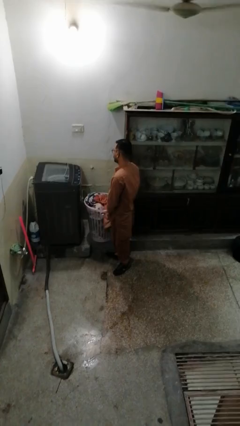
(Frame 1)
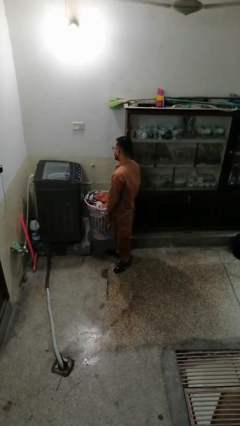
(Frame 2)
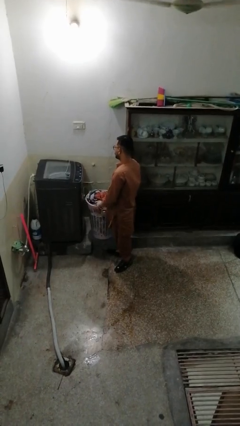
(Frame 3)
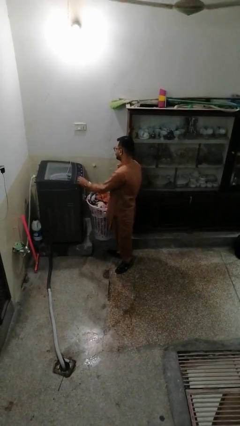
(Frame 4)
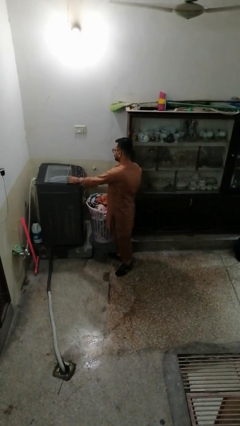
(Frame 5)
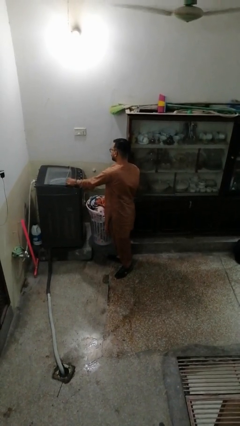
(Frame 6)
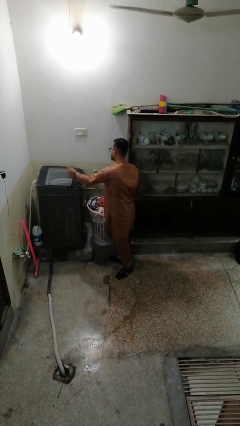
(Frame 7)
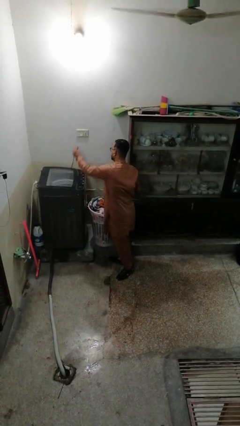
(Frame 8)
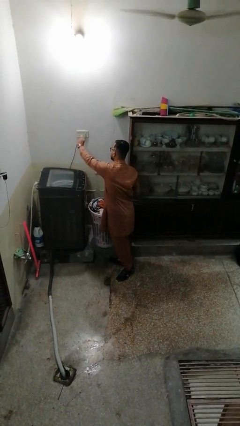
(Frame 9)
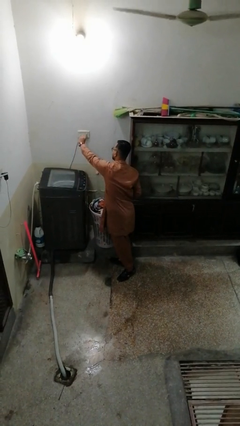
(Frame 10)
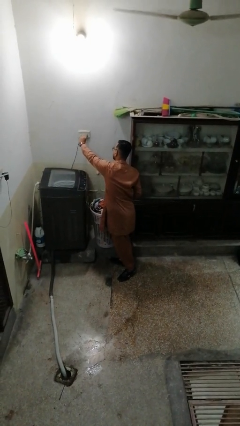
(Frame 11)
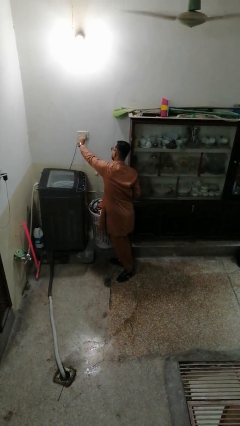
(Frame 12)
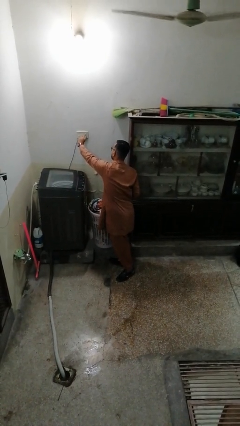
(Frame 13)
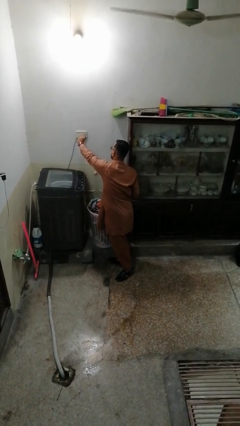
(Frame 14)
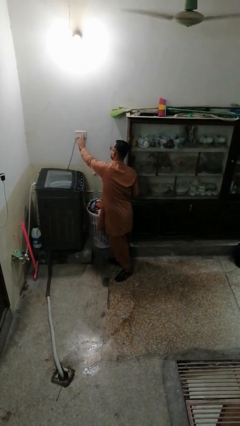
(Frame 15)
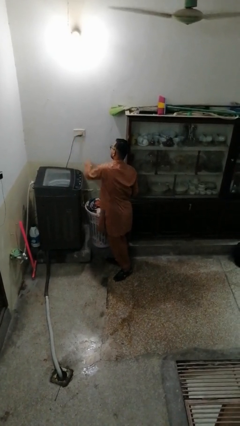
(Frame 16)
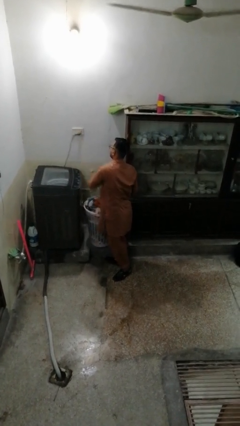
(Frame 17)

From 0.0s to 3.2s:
person plugs into electrical socket

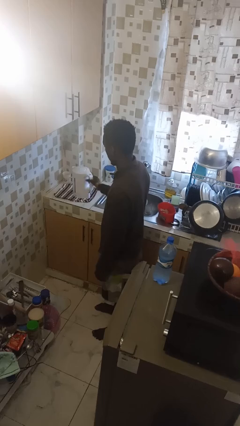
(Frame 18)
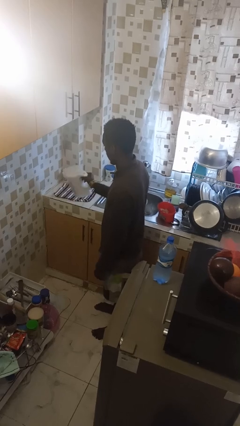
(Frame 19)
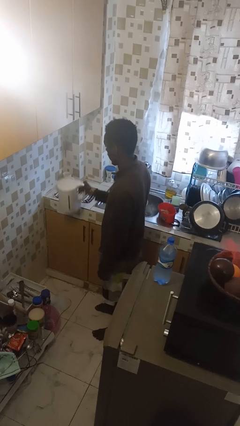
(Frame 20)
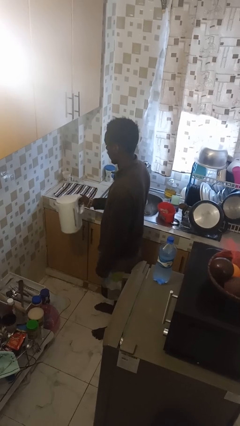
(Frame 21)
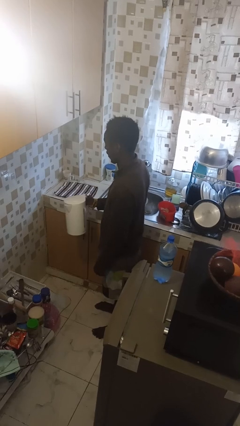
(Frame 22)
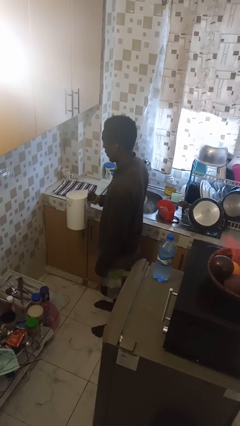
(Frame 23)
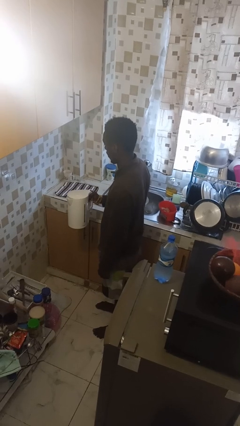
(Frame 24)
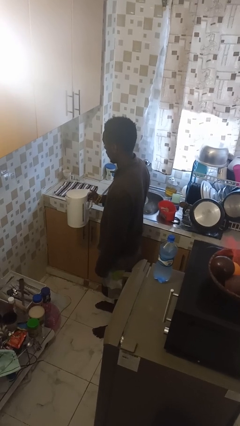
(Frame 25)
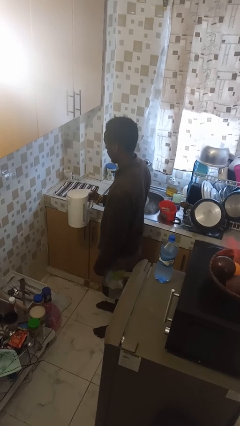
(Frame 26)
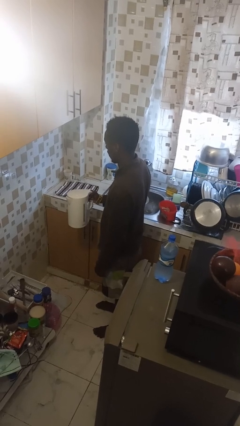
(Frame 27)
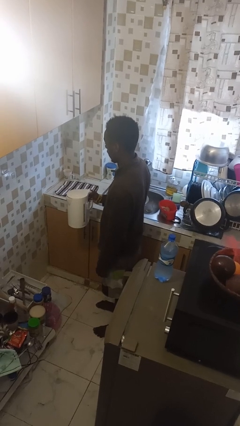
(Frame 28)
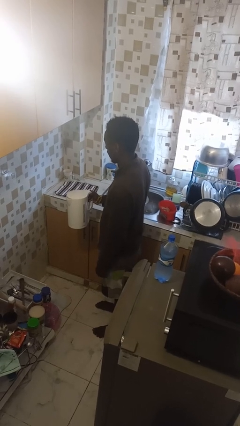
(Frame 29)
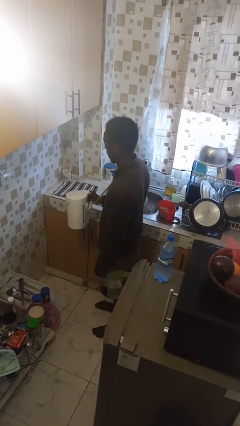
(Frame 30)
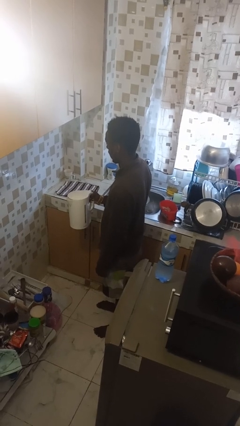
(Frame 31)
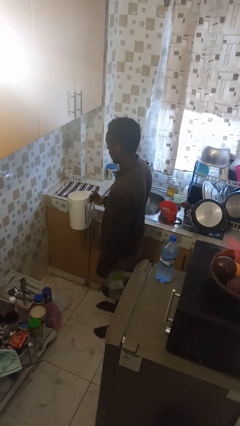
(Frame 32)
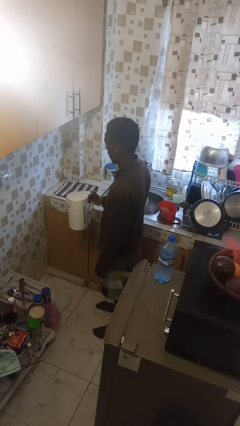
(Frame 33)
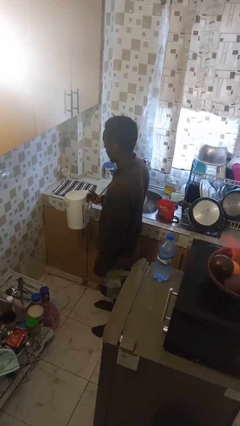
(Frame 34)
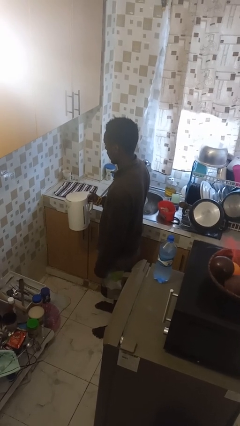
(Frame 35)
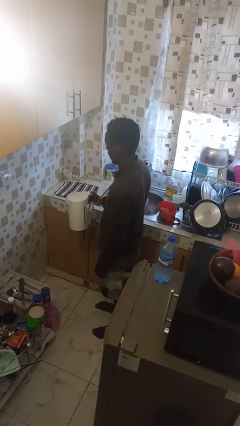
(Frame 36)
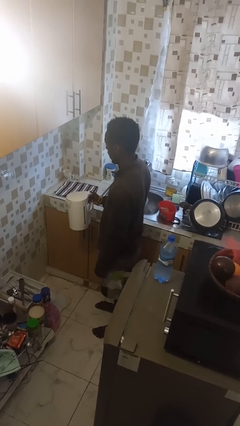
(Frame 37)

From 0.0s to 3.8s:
person picks up object from countertop

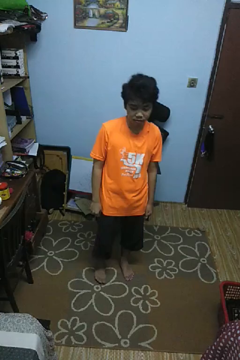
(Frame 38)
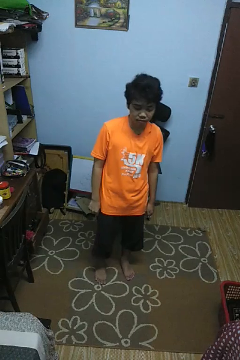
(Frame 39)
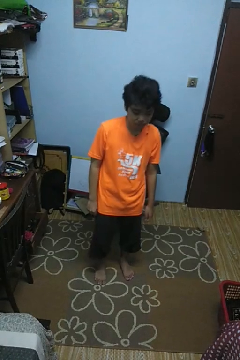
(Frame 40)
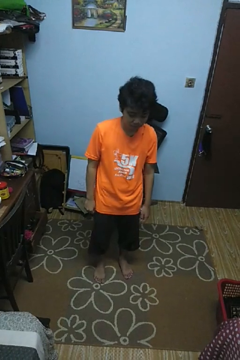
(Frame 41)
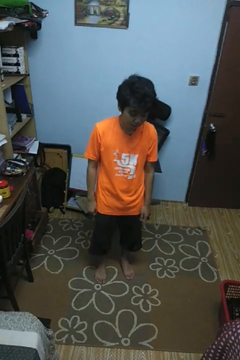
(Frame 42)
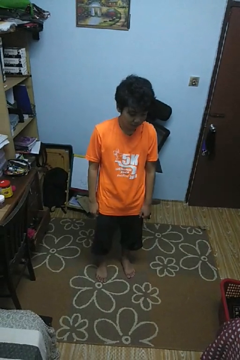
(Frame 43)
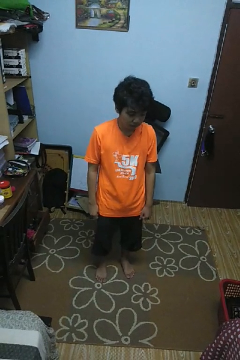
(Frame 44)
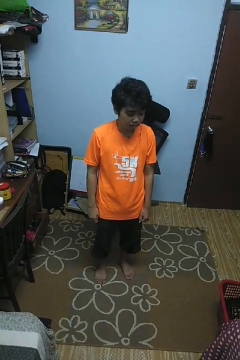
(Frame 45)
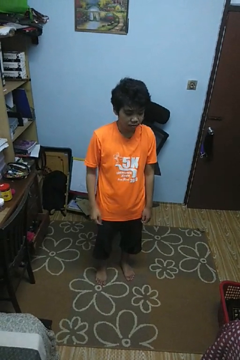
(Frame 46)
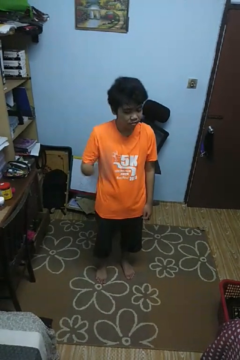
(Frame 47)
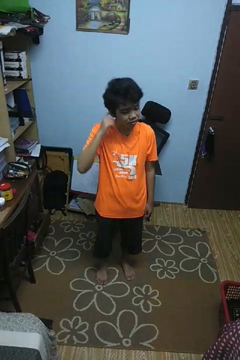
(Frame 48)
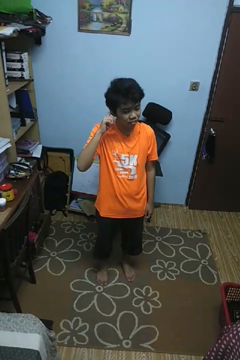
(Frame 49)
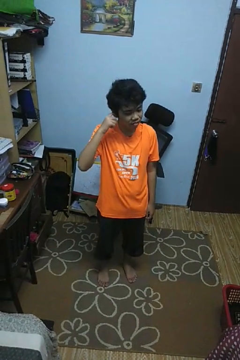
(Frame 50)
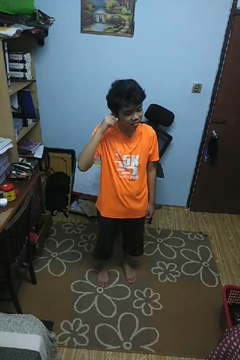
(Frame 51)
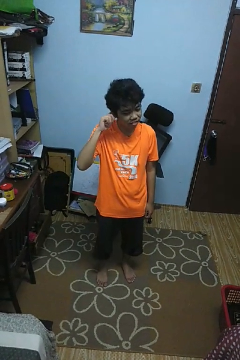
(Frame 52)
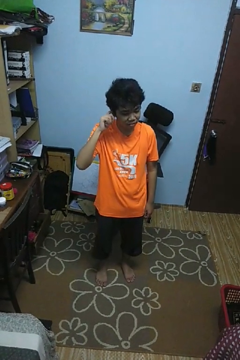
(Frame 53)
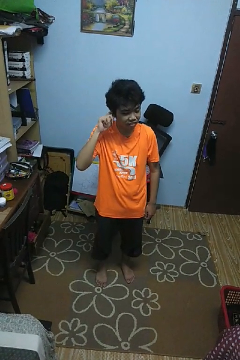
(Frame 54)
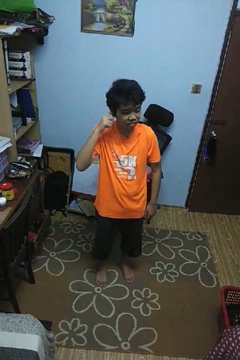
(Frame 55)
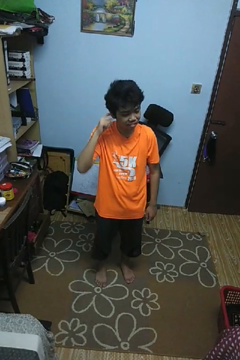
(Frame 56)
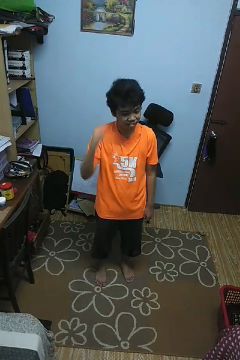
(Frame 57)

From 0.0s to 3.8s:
person puts fingers in ear

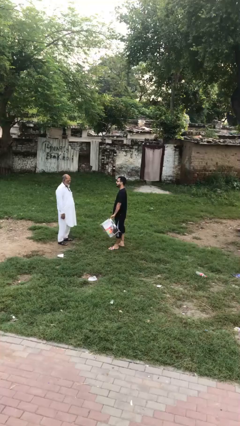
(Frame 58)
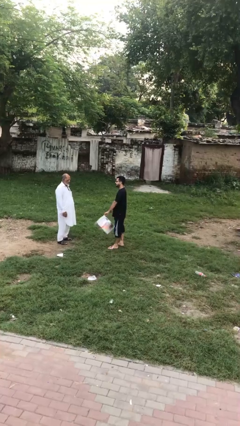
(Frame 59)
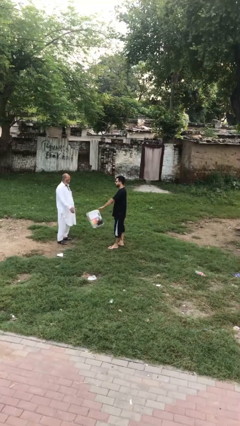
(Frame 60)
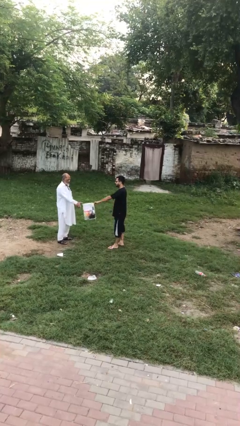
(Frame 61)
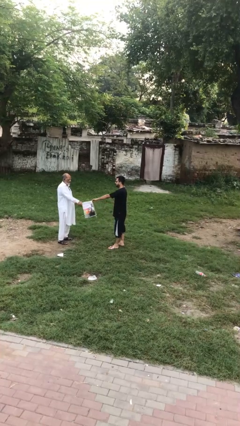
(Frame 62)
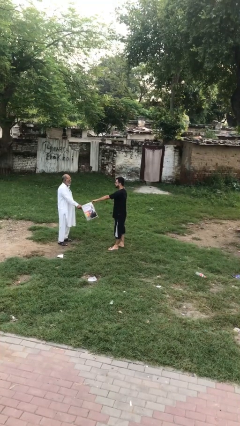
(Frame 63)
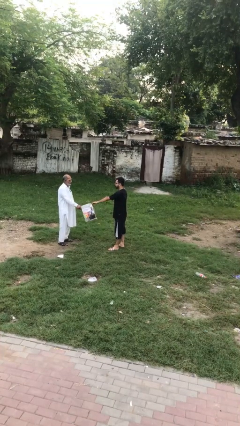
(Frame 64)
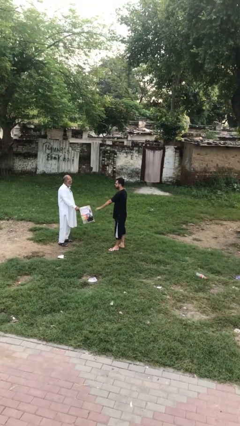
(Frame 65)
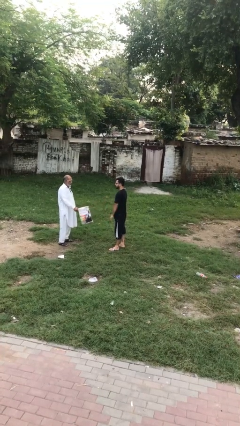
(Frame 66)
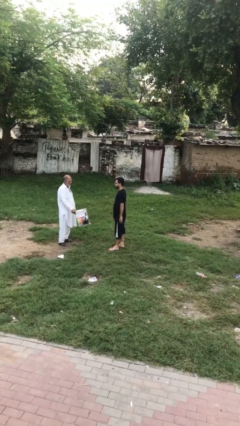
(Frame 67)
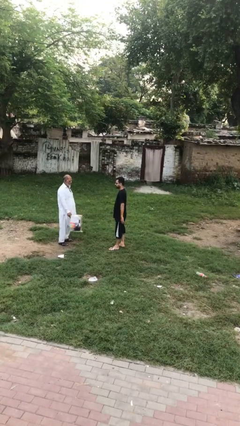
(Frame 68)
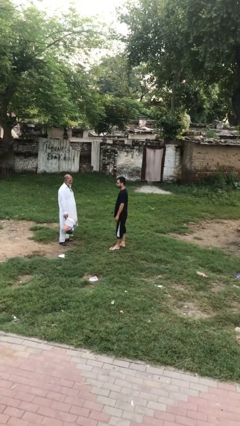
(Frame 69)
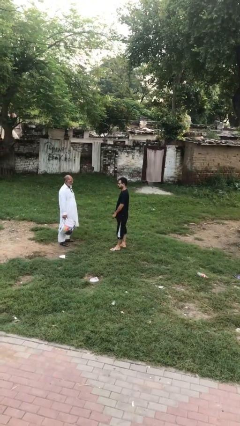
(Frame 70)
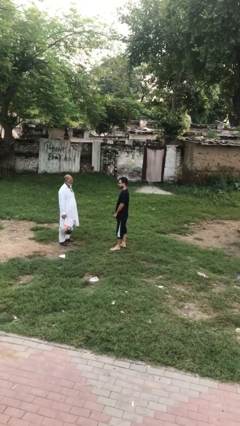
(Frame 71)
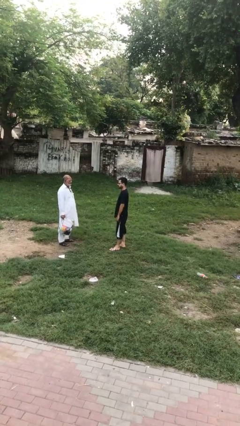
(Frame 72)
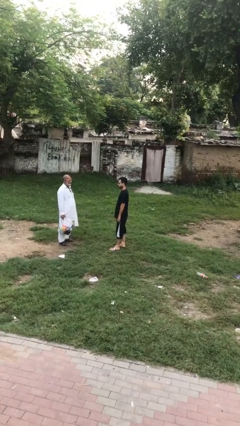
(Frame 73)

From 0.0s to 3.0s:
person transfers object to person

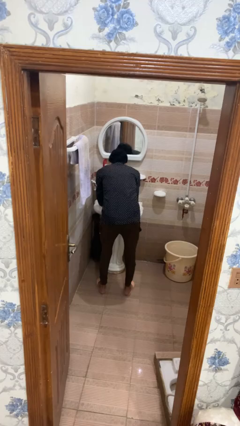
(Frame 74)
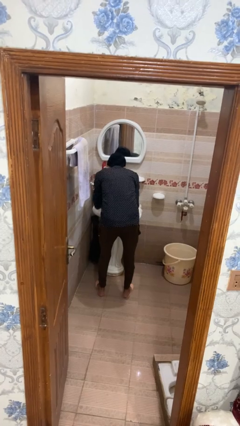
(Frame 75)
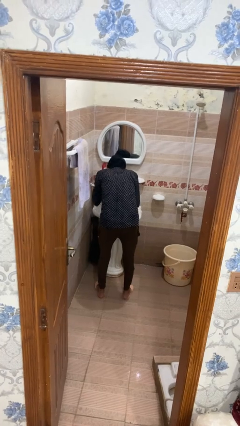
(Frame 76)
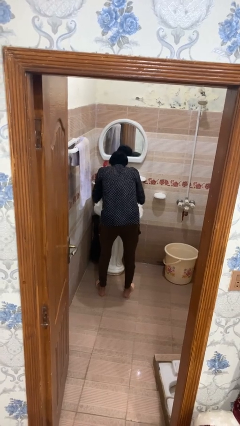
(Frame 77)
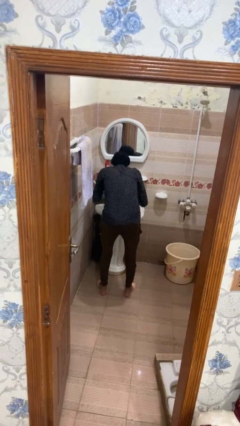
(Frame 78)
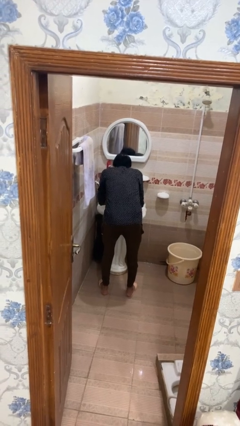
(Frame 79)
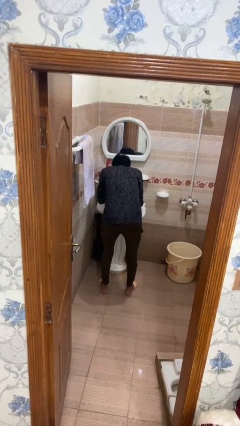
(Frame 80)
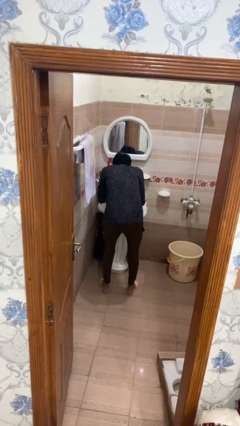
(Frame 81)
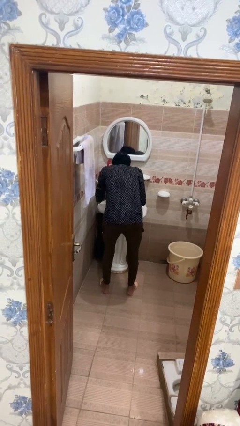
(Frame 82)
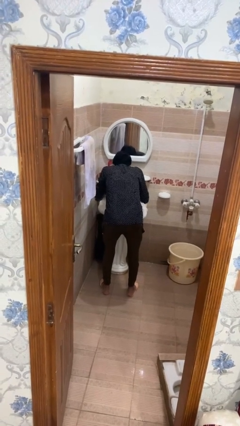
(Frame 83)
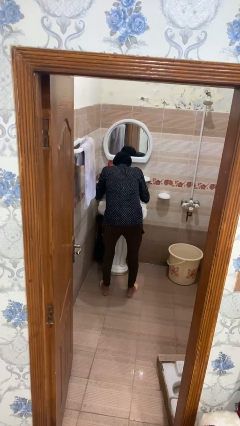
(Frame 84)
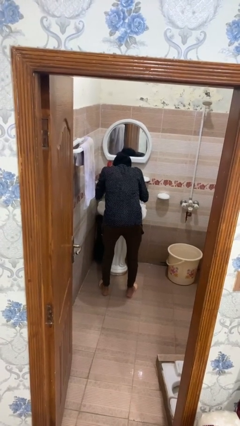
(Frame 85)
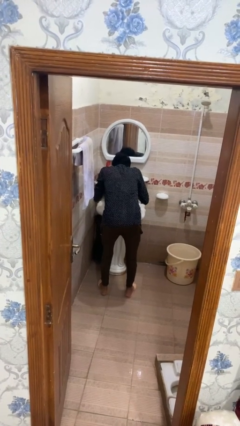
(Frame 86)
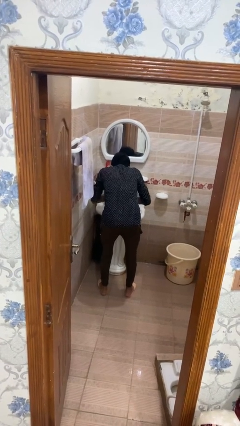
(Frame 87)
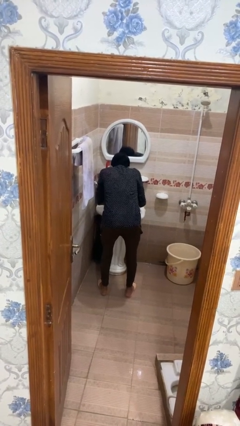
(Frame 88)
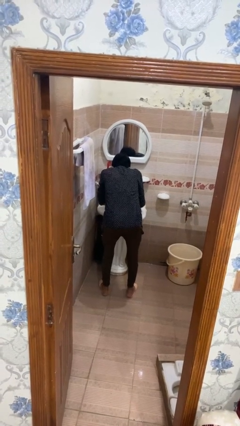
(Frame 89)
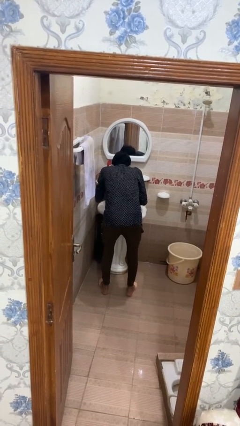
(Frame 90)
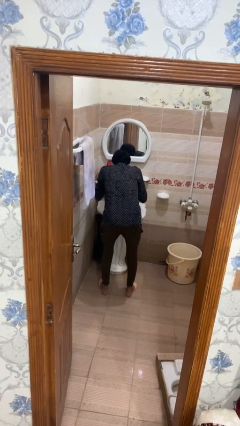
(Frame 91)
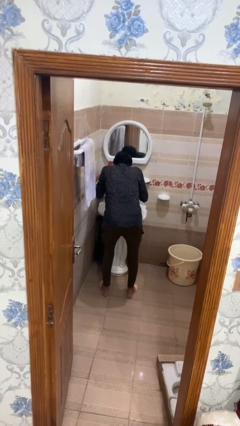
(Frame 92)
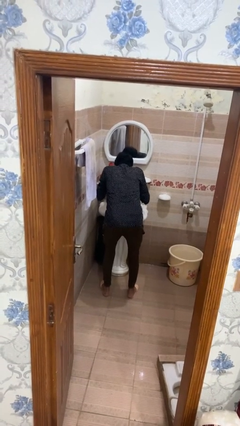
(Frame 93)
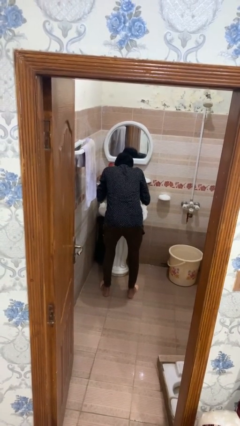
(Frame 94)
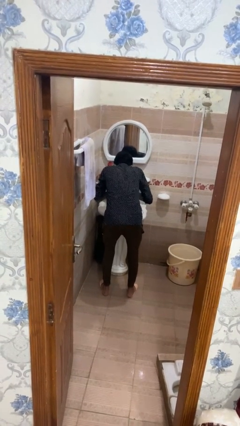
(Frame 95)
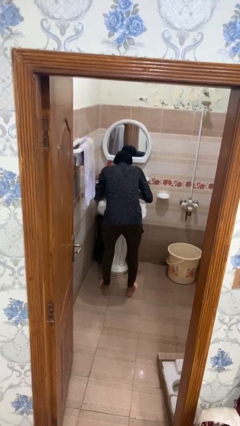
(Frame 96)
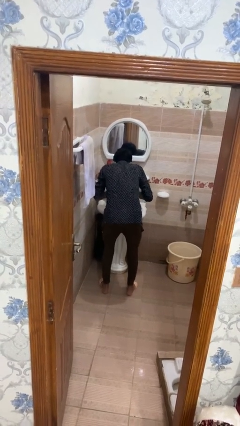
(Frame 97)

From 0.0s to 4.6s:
person washes face
